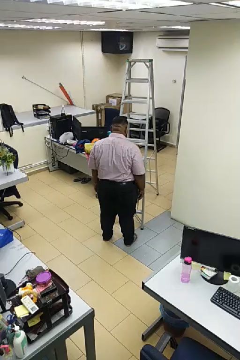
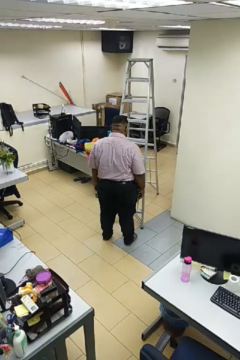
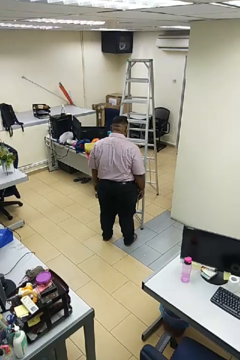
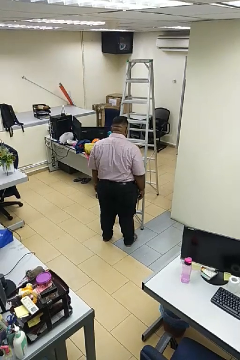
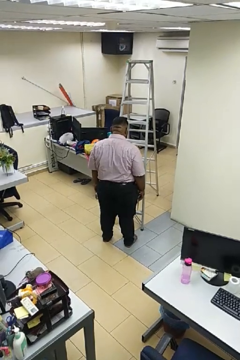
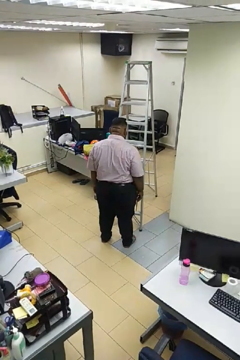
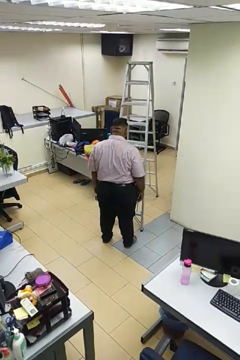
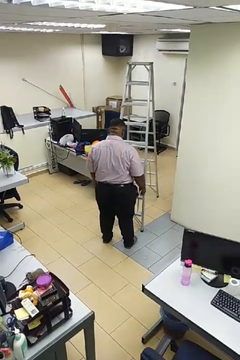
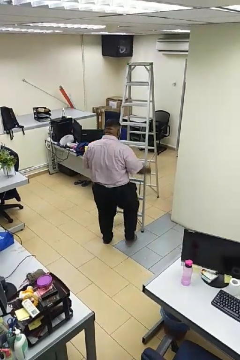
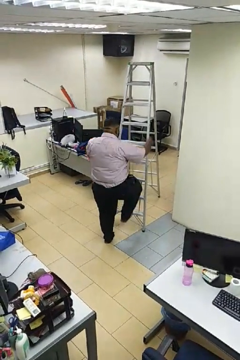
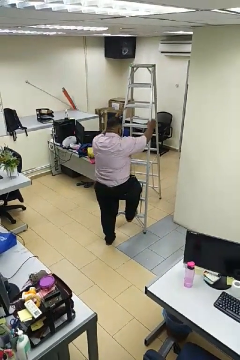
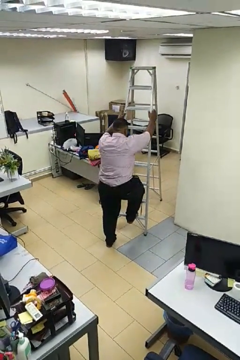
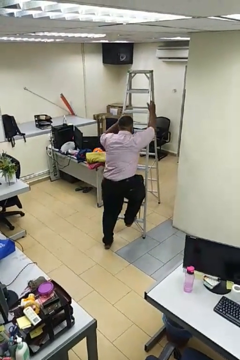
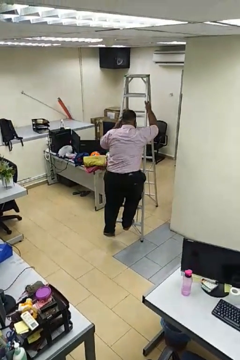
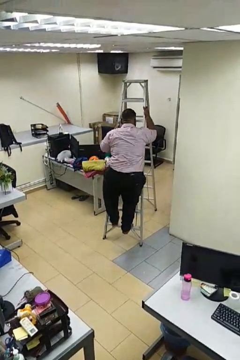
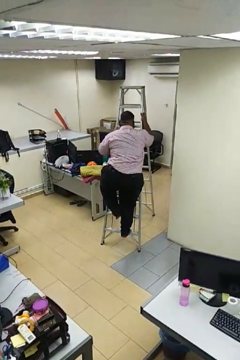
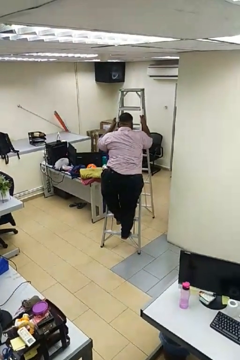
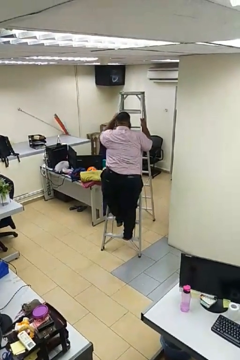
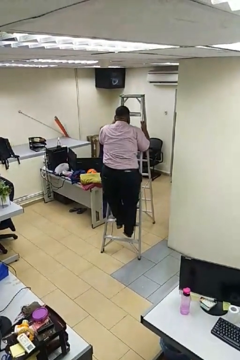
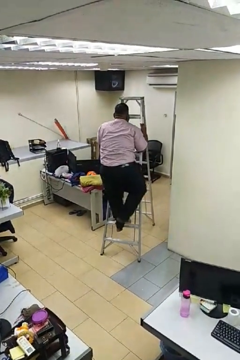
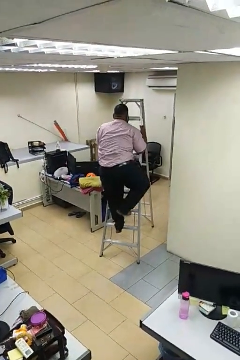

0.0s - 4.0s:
person climbs up ladder

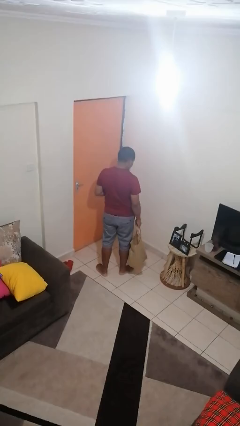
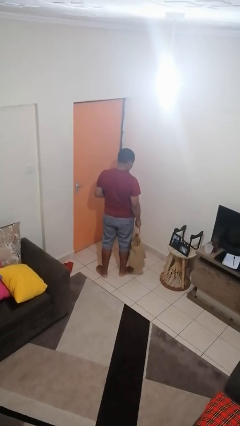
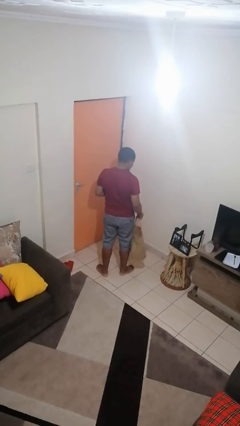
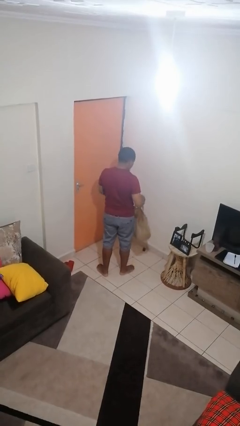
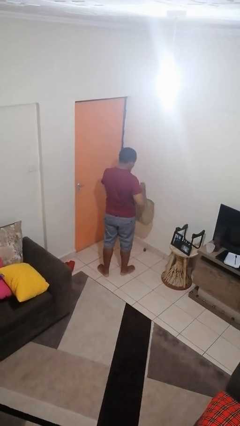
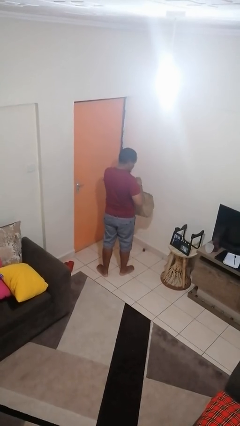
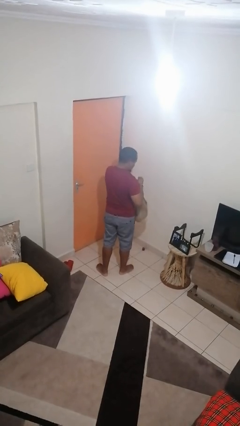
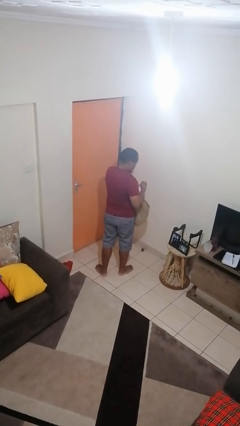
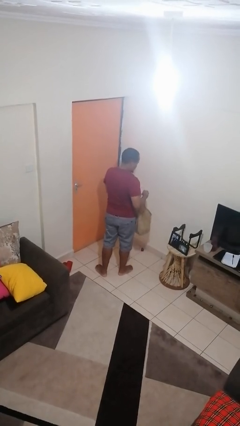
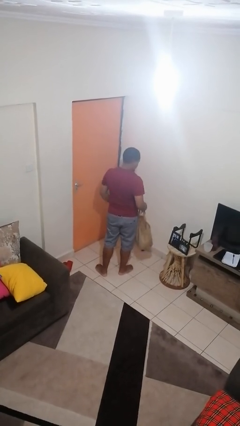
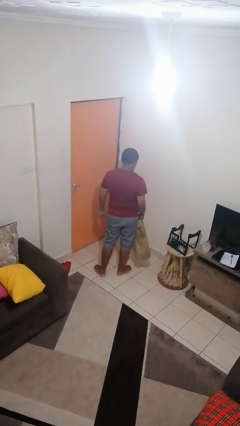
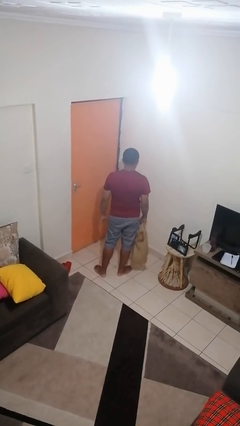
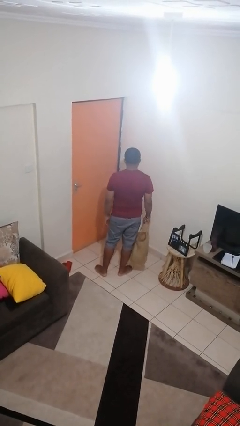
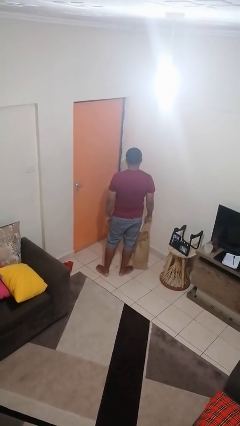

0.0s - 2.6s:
person puts object into bag

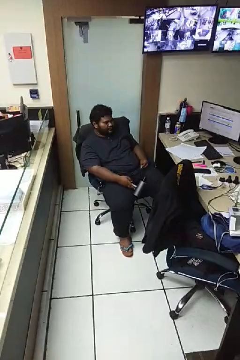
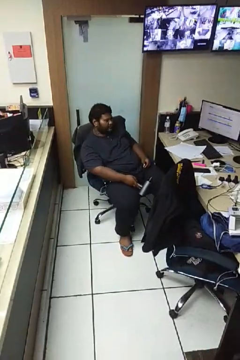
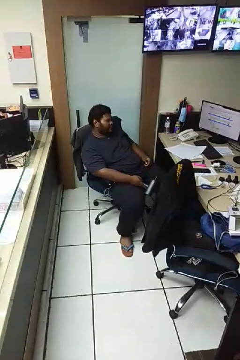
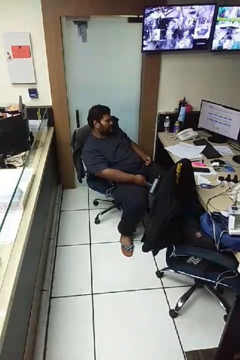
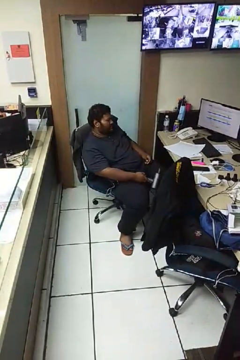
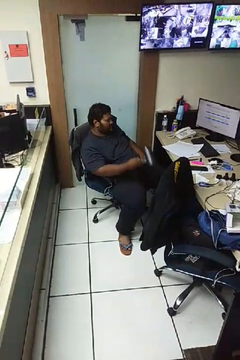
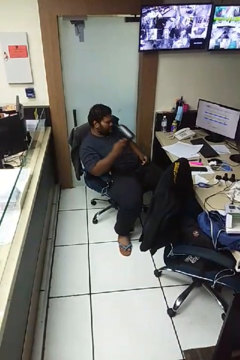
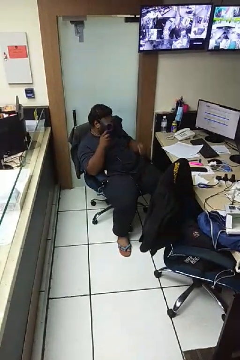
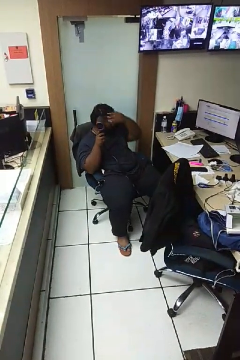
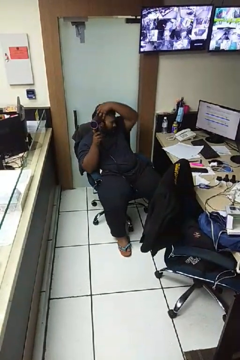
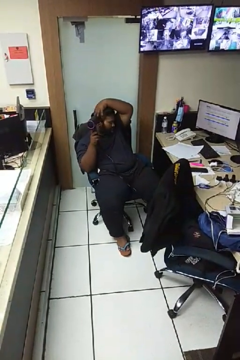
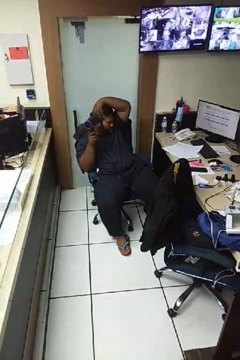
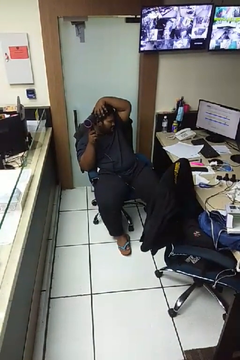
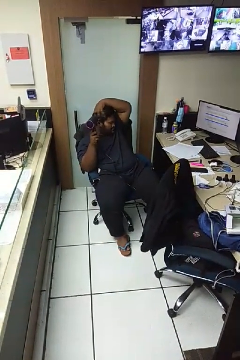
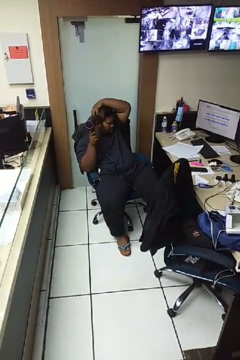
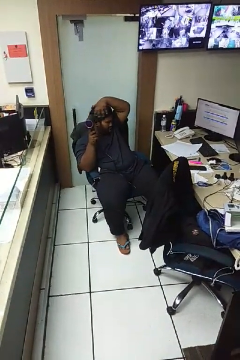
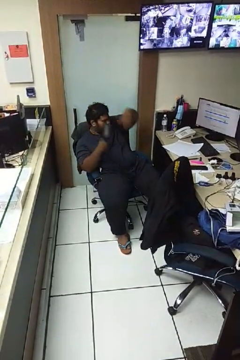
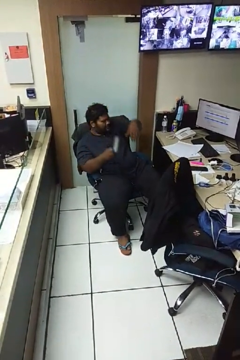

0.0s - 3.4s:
person dries hair with hairdryer

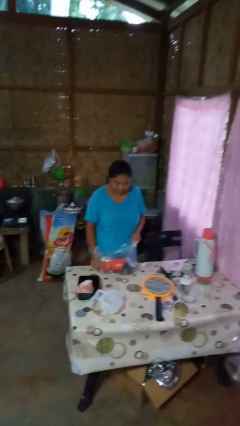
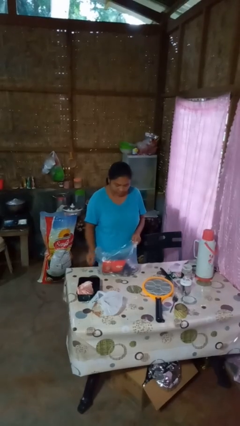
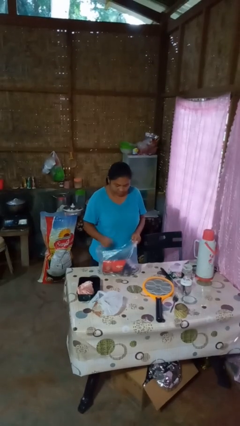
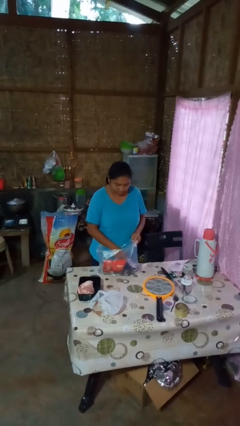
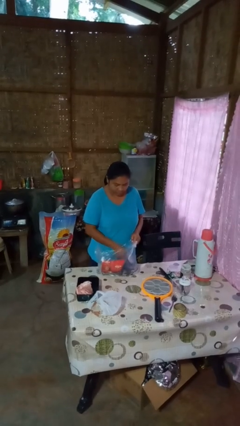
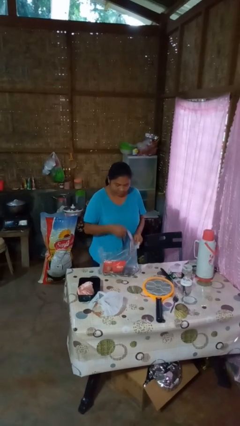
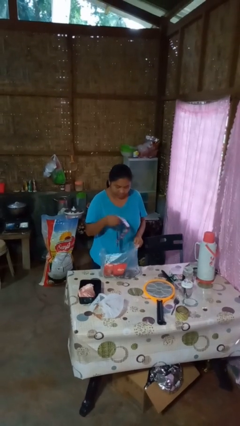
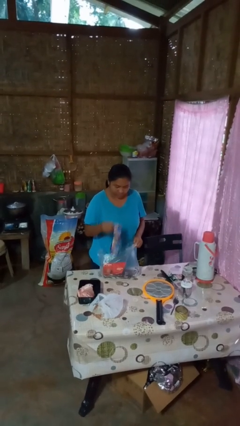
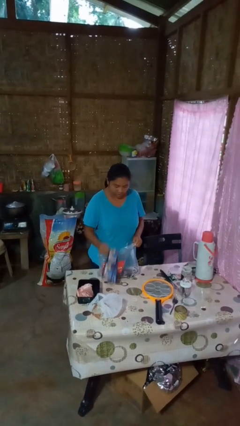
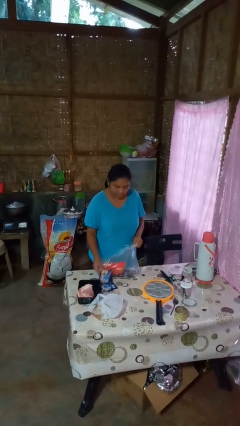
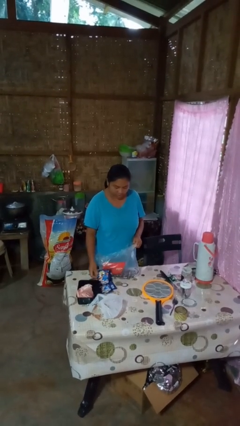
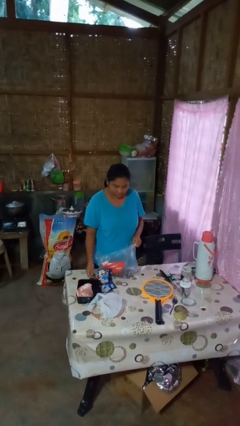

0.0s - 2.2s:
person takes object from bag

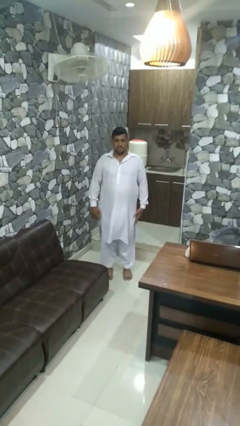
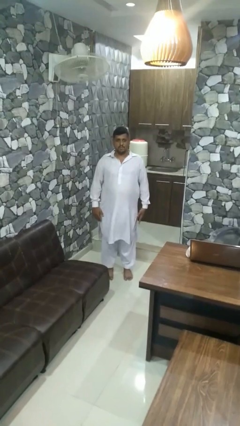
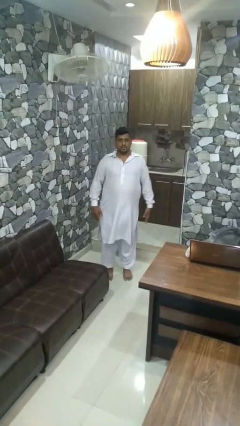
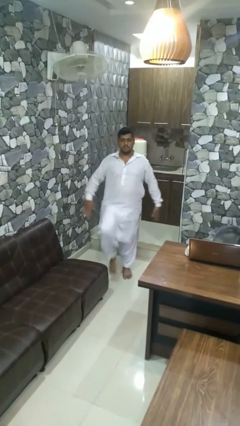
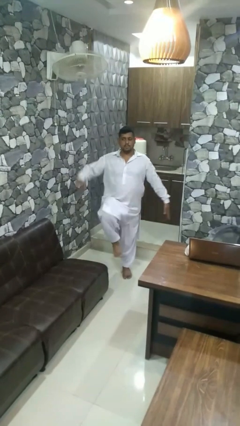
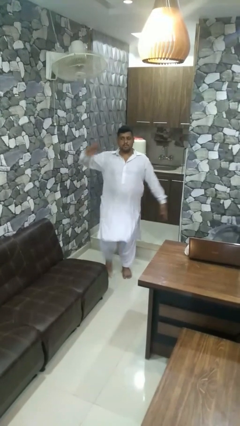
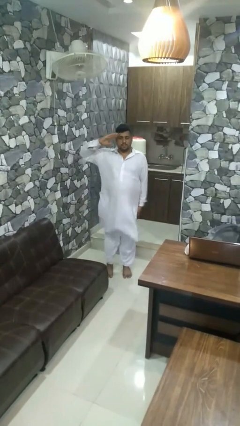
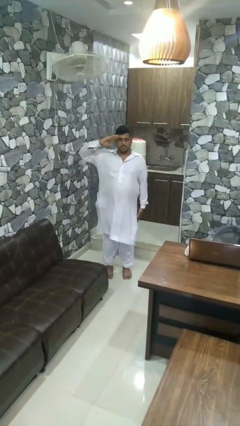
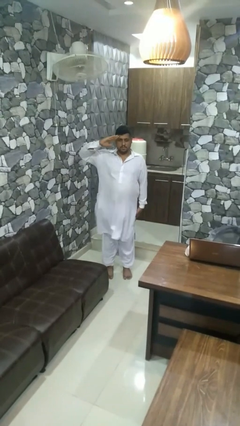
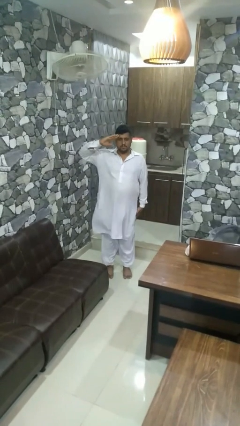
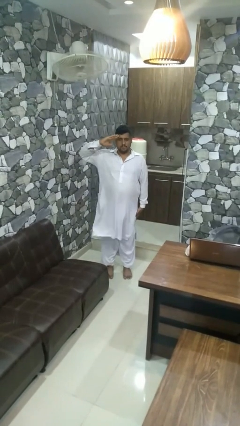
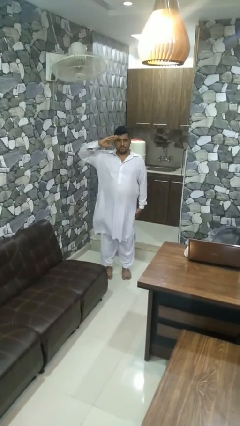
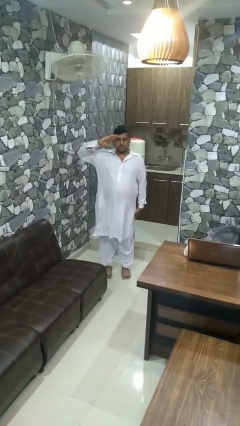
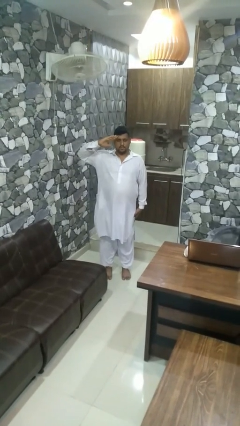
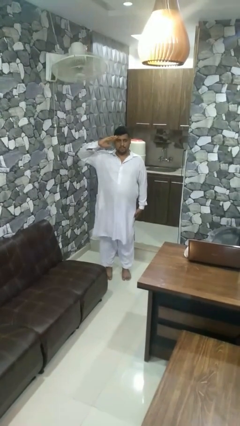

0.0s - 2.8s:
person salutes

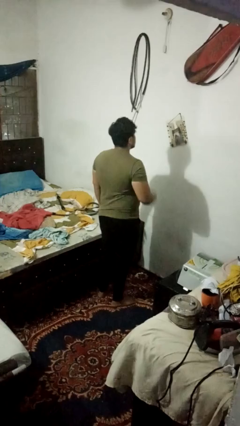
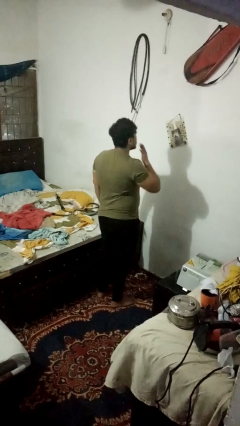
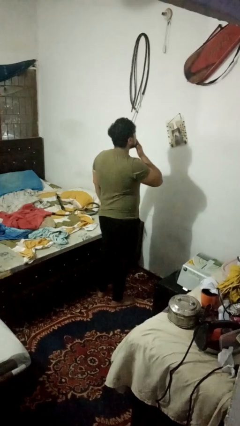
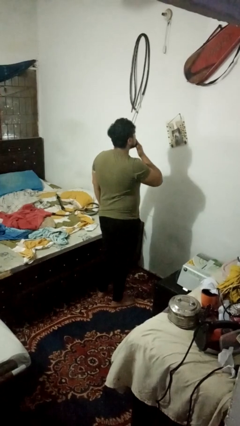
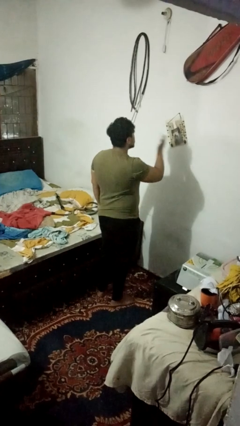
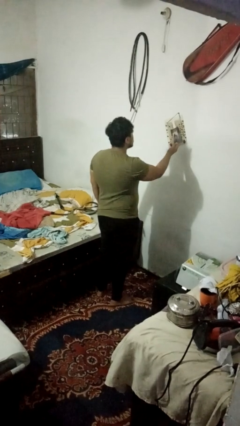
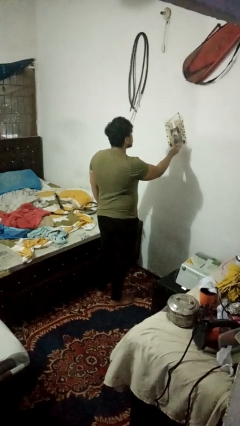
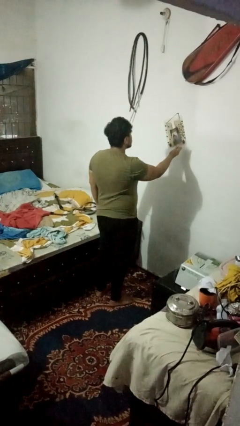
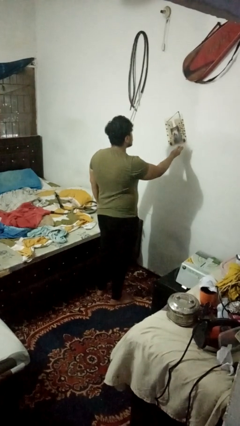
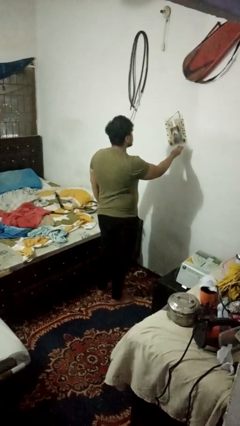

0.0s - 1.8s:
person gestures blow kiss

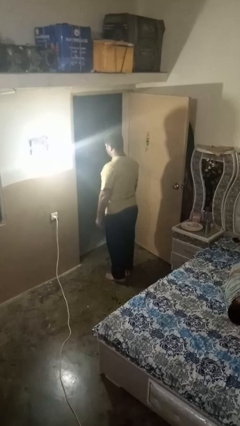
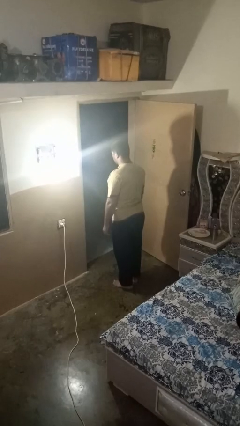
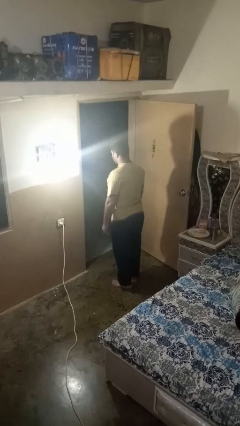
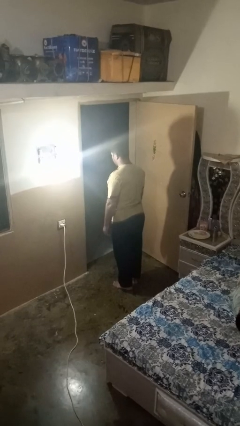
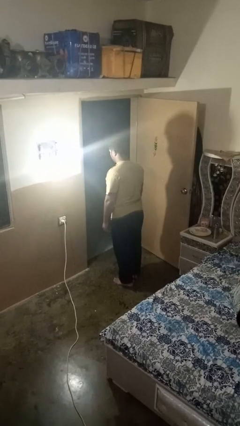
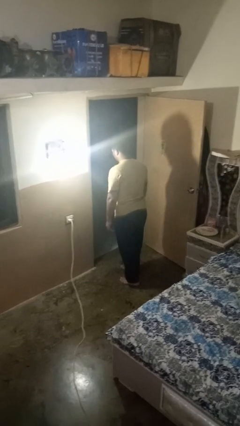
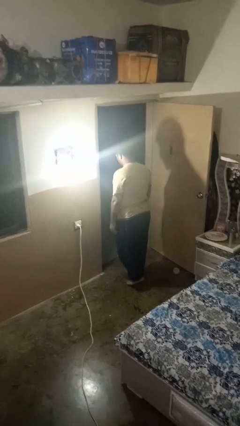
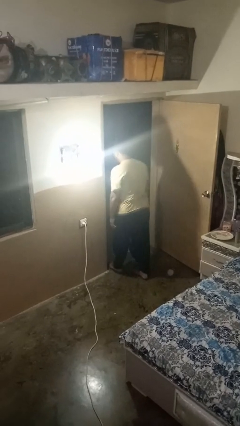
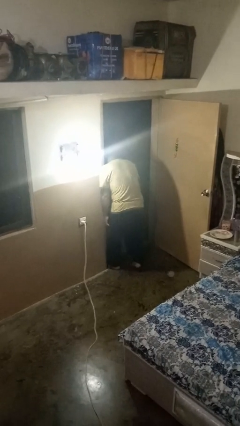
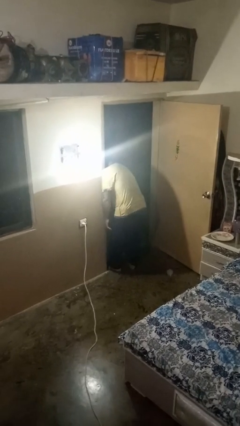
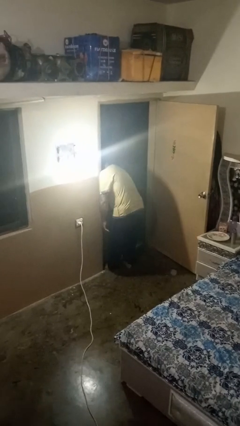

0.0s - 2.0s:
person bumps into wall
